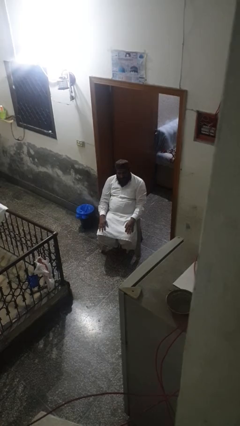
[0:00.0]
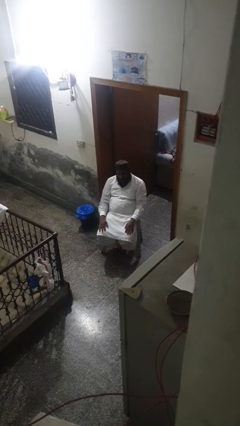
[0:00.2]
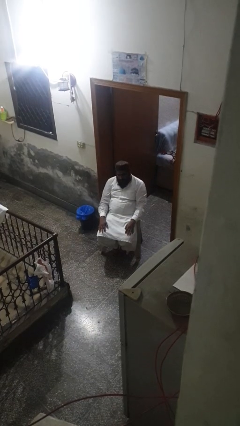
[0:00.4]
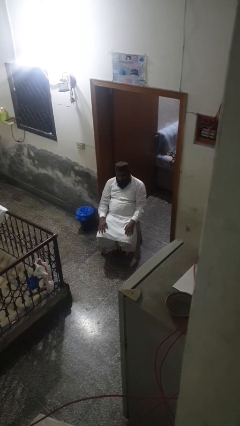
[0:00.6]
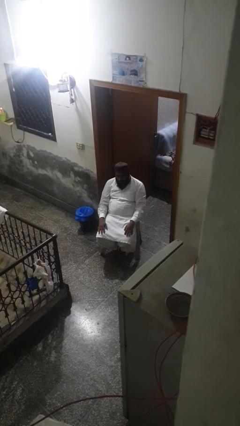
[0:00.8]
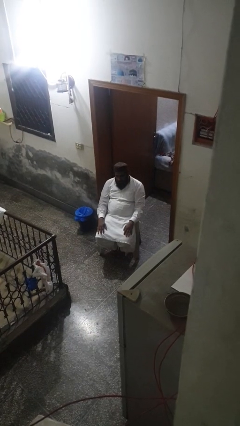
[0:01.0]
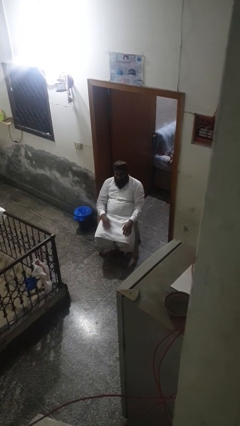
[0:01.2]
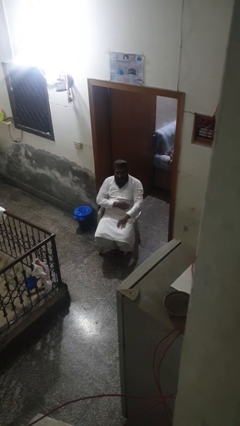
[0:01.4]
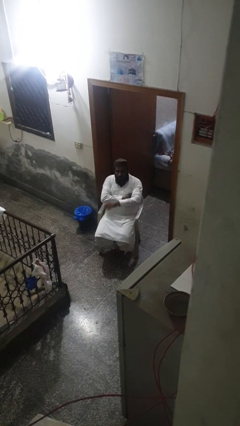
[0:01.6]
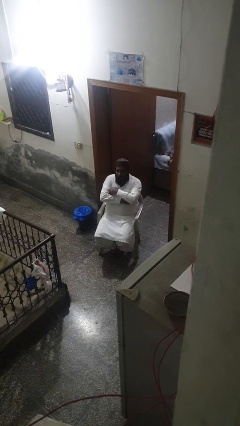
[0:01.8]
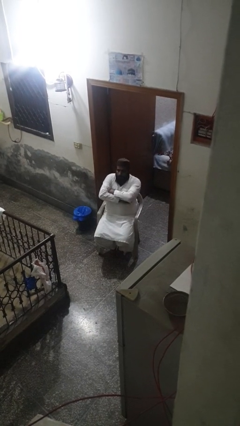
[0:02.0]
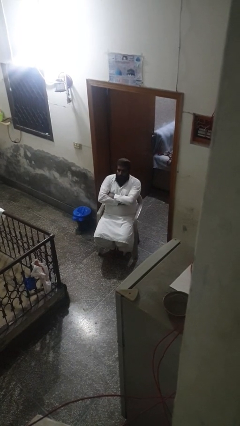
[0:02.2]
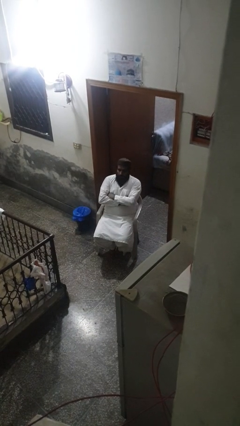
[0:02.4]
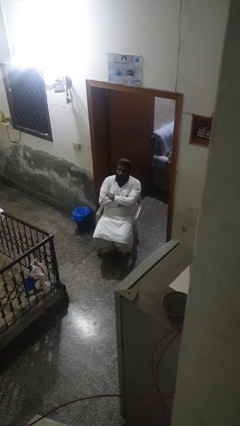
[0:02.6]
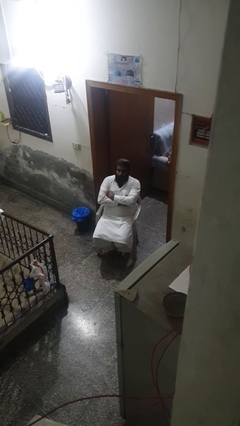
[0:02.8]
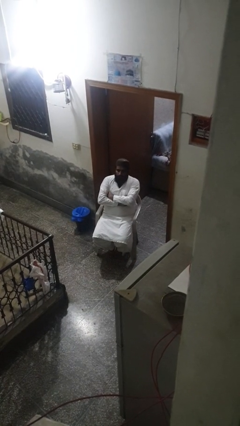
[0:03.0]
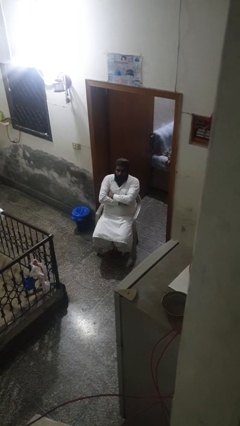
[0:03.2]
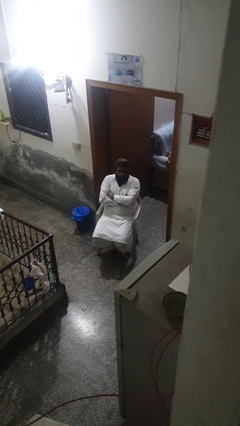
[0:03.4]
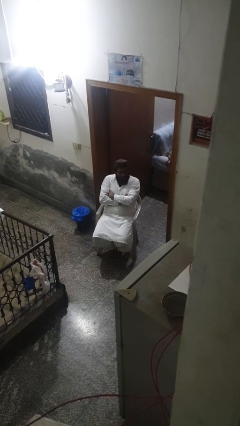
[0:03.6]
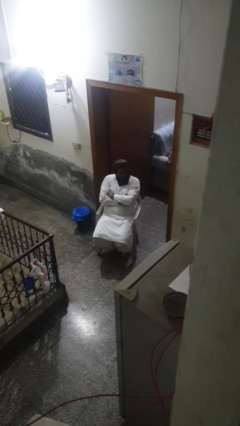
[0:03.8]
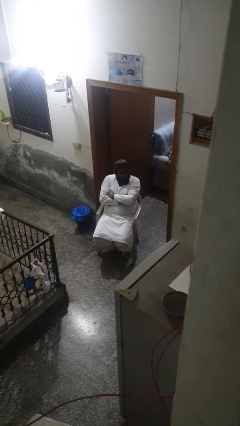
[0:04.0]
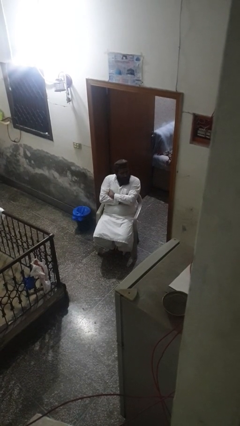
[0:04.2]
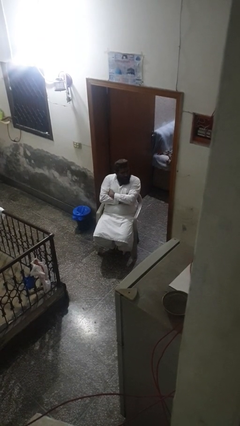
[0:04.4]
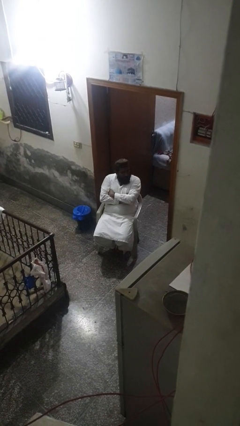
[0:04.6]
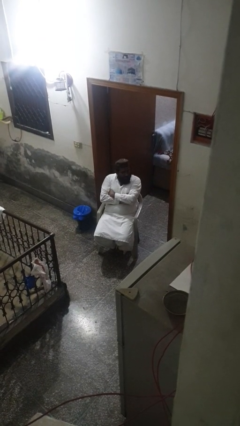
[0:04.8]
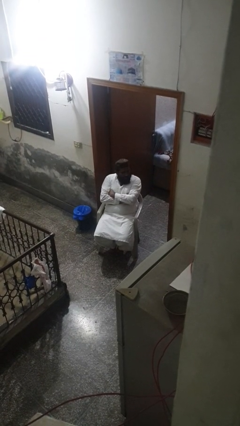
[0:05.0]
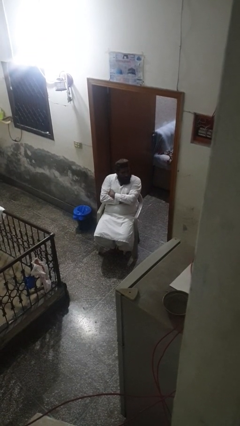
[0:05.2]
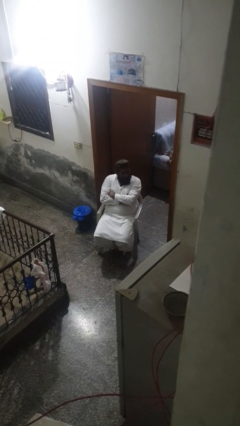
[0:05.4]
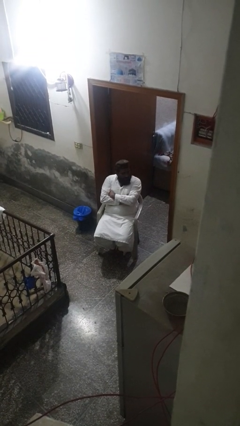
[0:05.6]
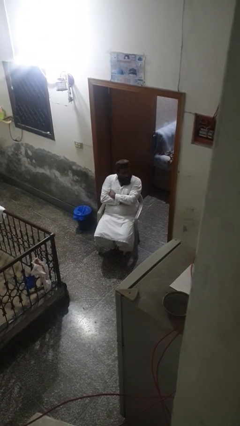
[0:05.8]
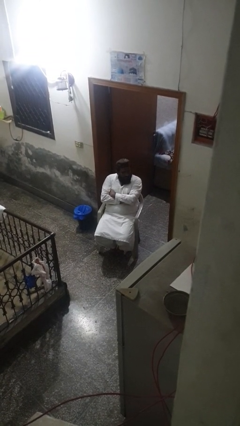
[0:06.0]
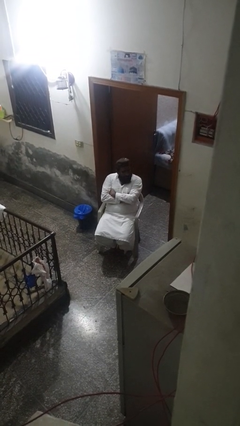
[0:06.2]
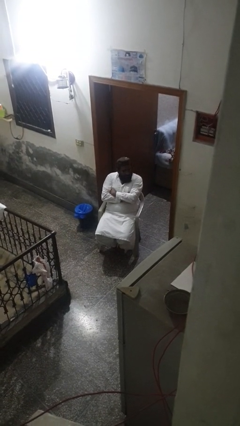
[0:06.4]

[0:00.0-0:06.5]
person crosses arms

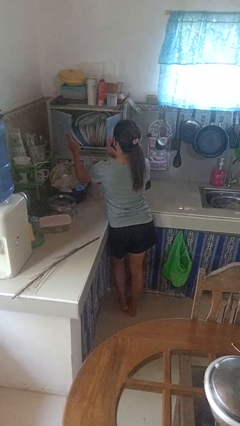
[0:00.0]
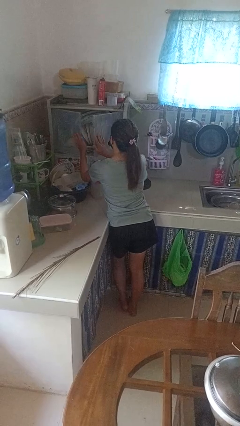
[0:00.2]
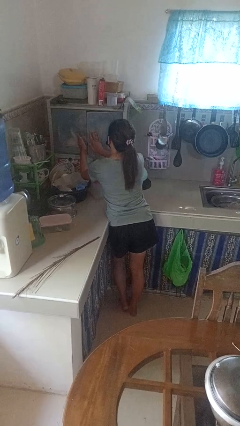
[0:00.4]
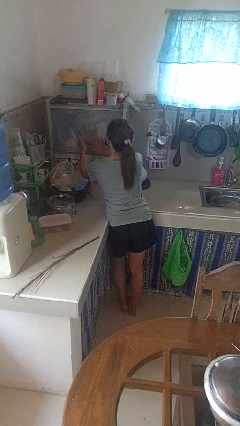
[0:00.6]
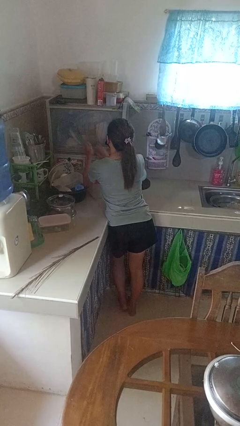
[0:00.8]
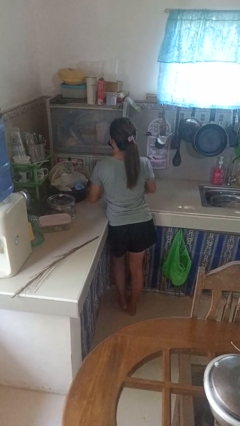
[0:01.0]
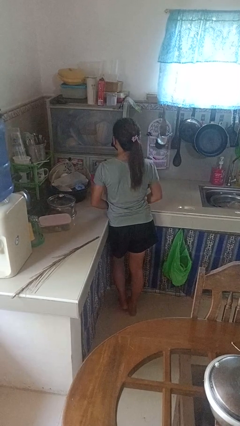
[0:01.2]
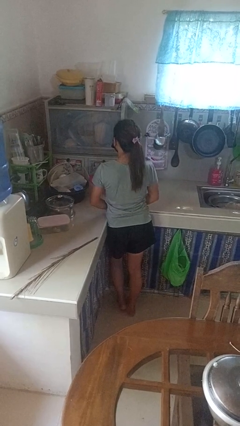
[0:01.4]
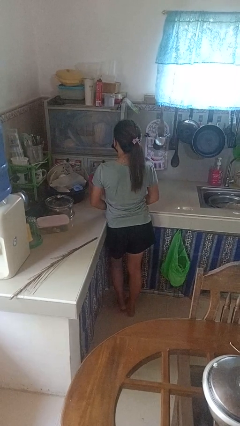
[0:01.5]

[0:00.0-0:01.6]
person closes clothes washer

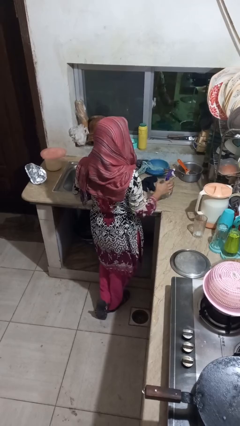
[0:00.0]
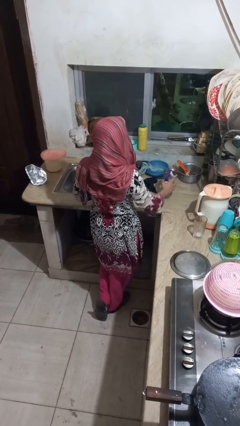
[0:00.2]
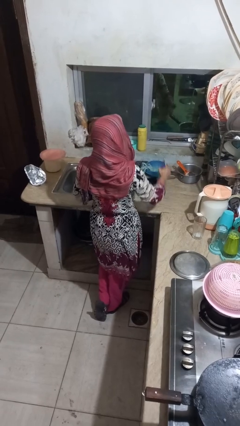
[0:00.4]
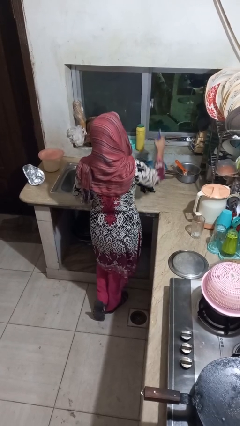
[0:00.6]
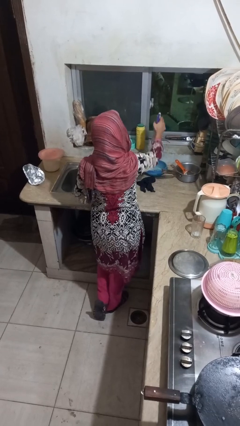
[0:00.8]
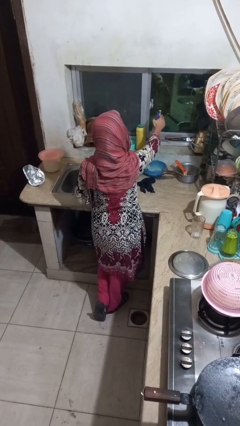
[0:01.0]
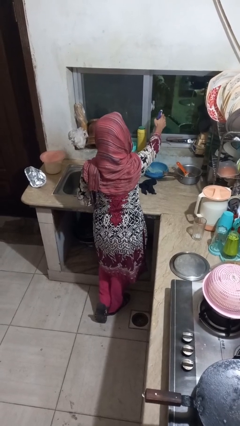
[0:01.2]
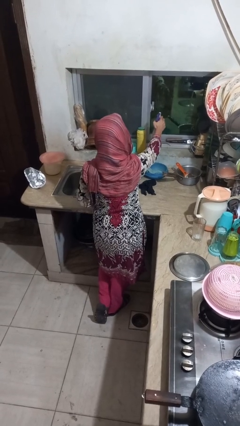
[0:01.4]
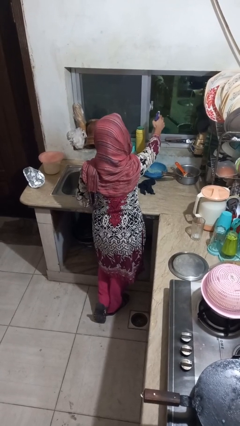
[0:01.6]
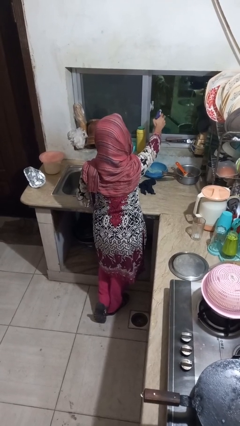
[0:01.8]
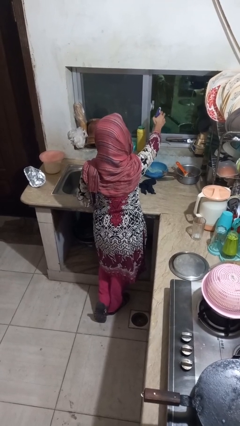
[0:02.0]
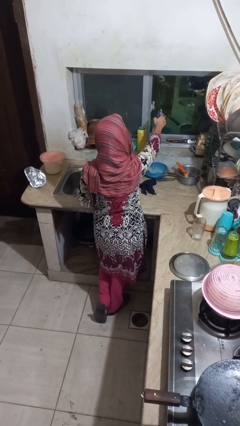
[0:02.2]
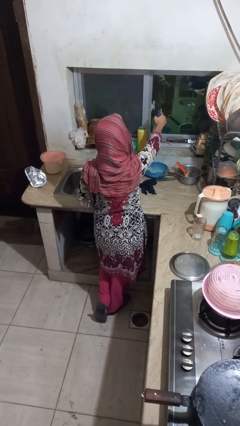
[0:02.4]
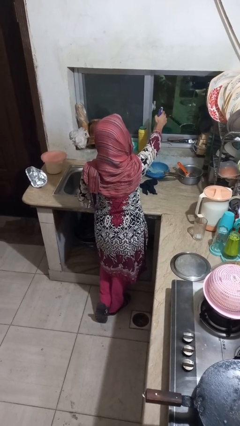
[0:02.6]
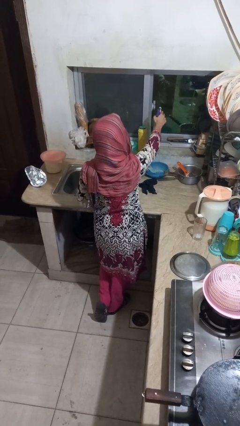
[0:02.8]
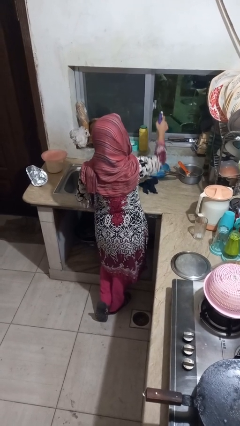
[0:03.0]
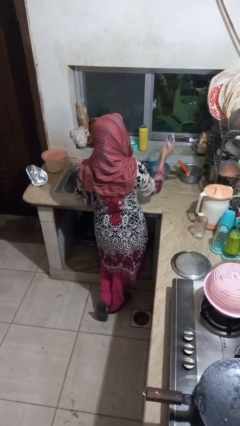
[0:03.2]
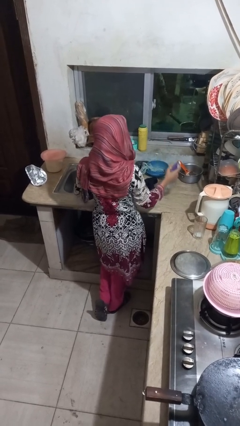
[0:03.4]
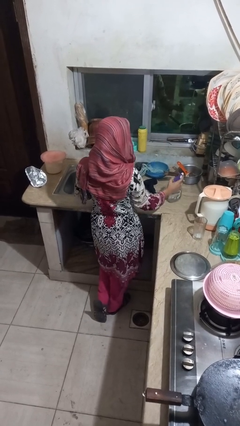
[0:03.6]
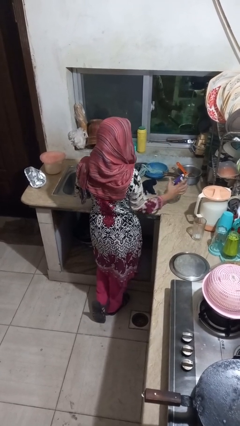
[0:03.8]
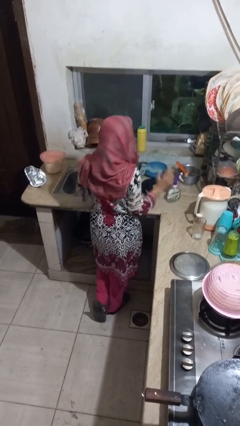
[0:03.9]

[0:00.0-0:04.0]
person sprays from bottle

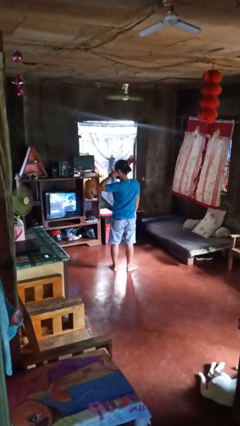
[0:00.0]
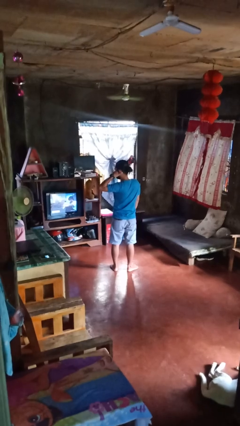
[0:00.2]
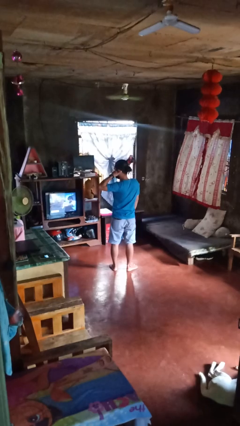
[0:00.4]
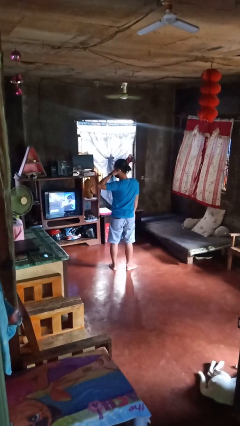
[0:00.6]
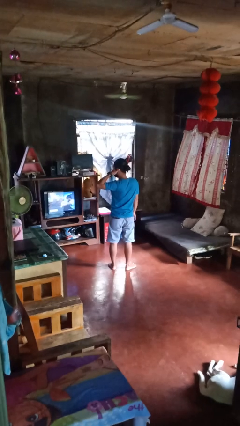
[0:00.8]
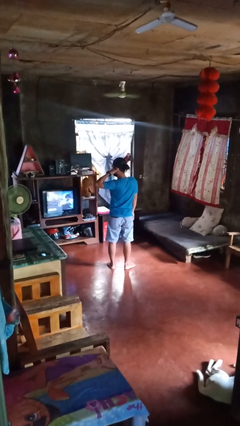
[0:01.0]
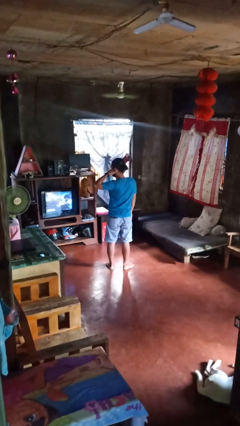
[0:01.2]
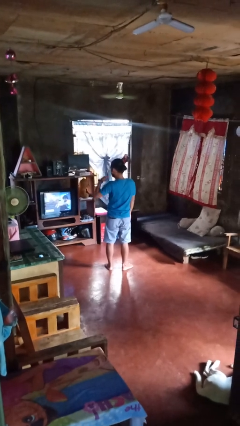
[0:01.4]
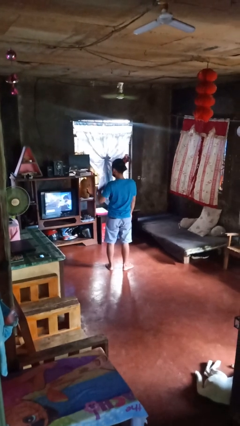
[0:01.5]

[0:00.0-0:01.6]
person gestures call me

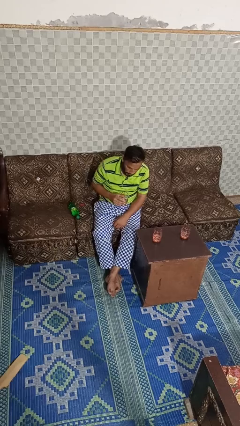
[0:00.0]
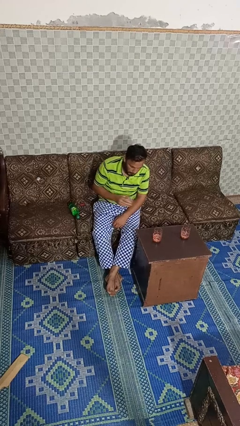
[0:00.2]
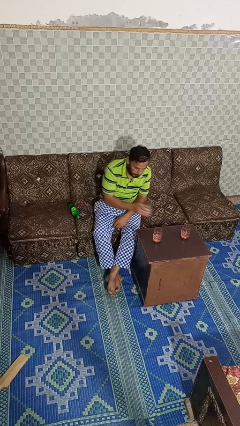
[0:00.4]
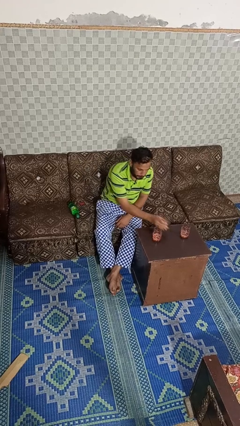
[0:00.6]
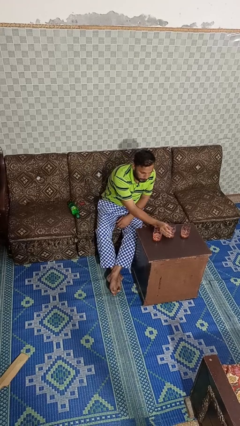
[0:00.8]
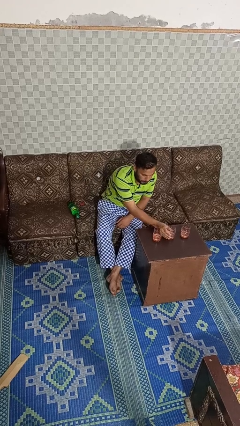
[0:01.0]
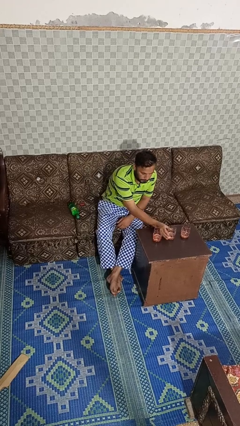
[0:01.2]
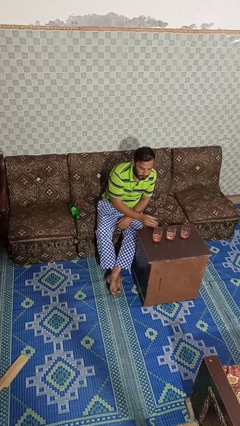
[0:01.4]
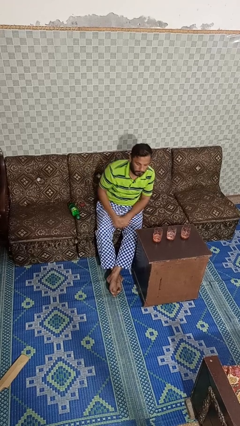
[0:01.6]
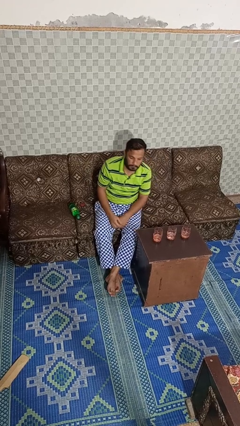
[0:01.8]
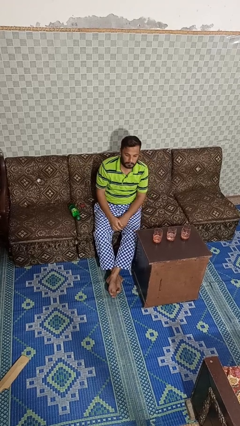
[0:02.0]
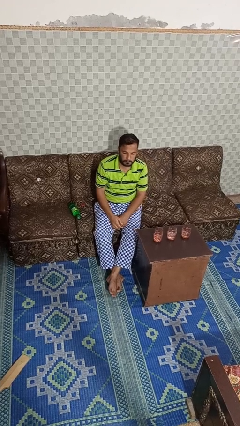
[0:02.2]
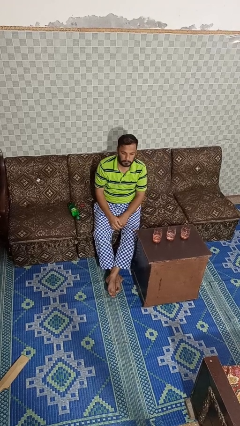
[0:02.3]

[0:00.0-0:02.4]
person puts down object on table

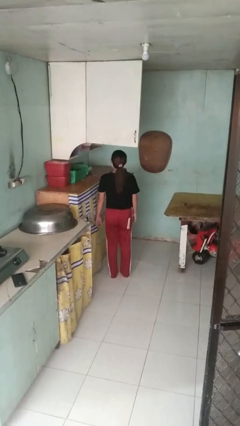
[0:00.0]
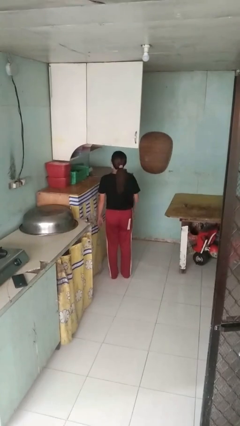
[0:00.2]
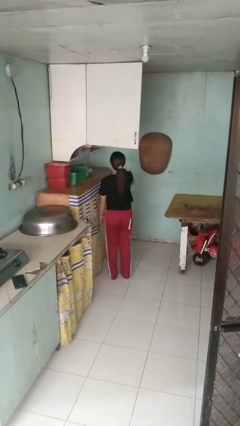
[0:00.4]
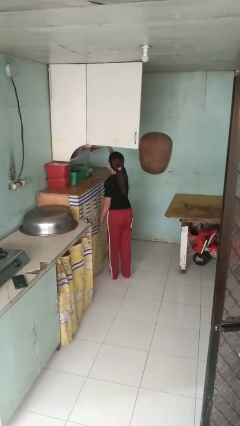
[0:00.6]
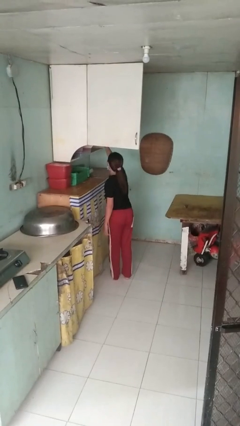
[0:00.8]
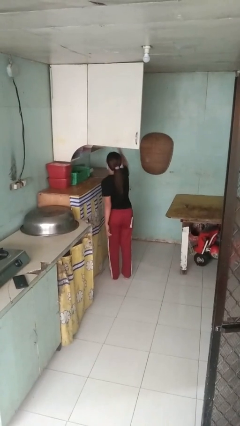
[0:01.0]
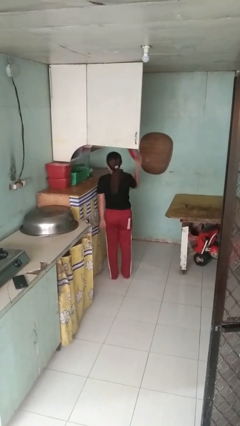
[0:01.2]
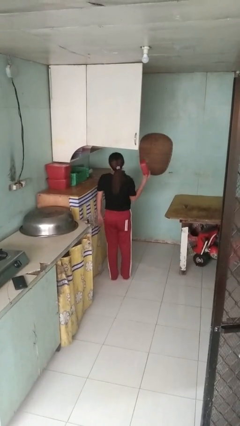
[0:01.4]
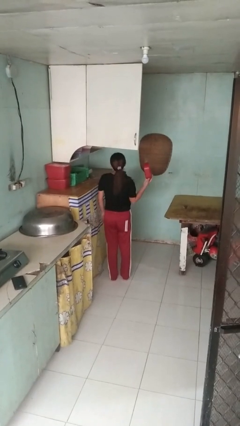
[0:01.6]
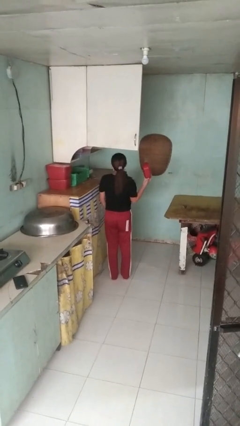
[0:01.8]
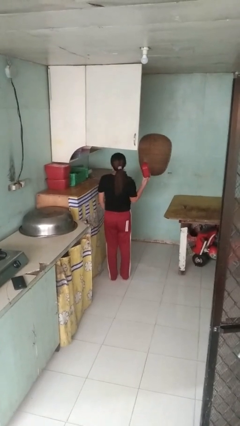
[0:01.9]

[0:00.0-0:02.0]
person takes object from cabinet
